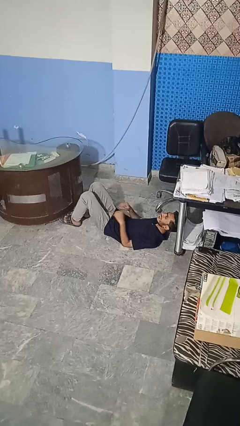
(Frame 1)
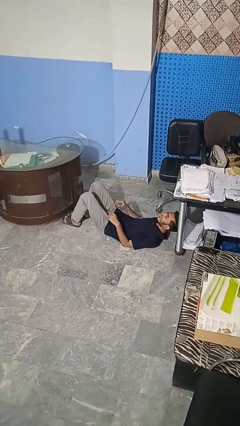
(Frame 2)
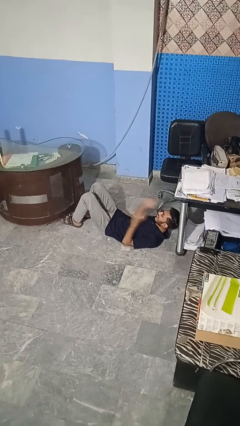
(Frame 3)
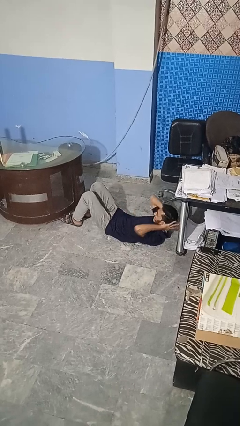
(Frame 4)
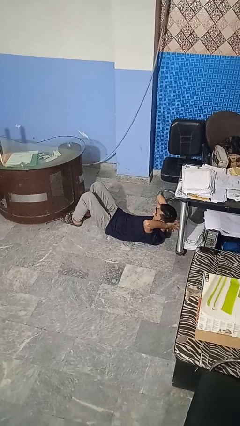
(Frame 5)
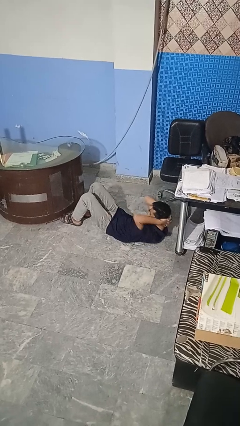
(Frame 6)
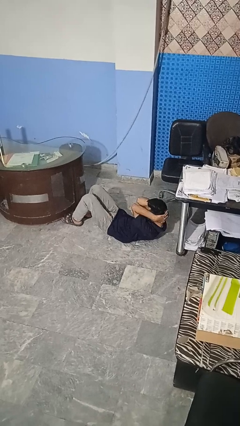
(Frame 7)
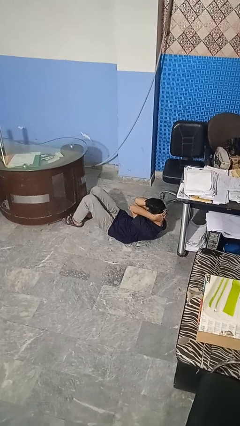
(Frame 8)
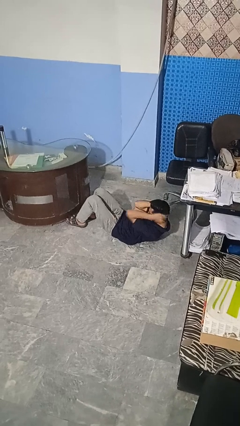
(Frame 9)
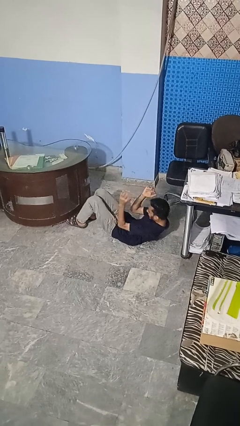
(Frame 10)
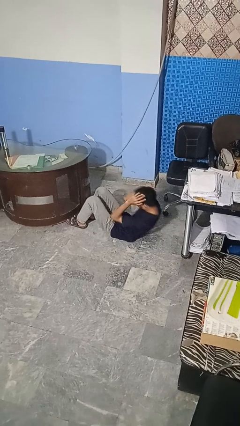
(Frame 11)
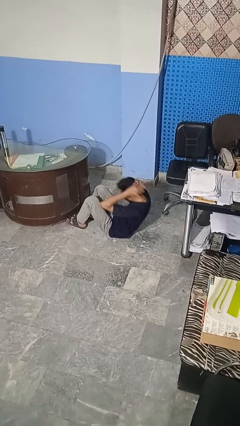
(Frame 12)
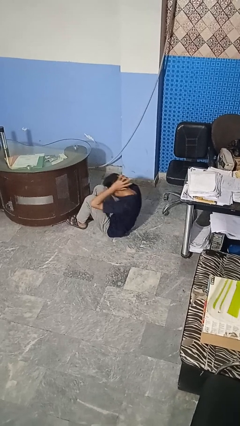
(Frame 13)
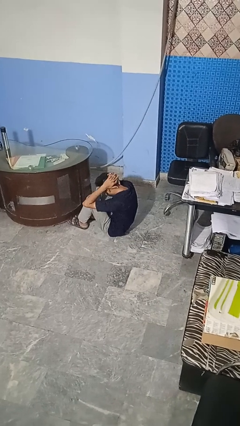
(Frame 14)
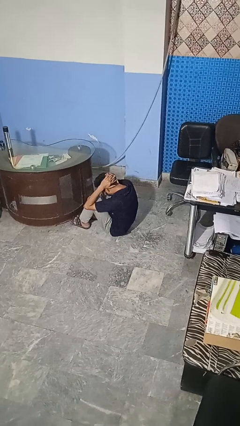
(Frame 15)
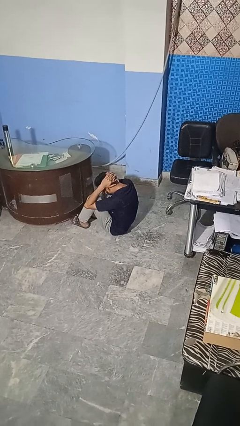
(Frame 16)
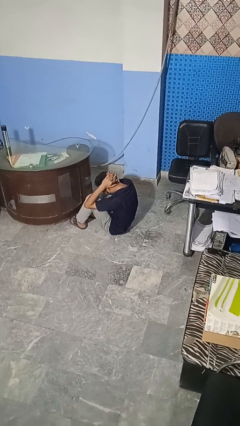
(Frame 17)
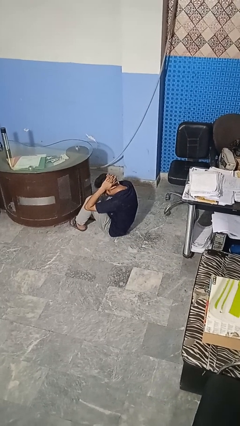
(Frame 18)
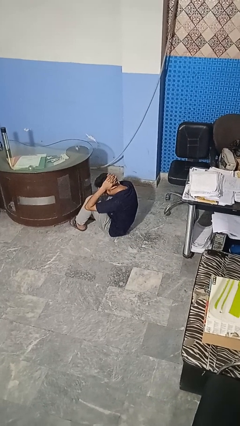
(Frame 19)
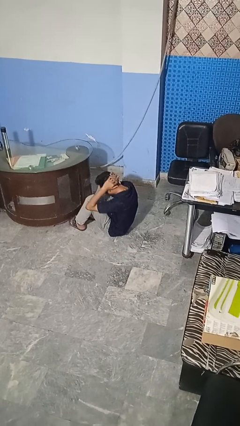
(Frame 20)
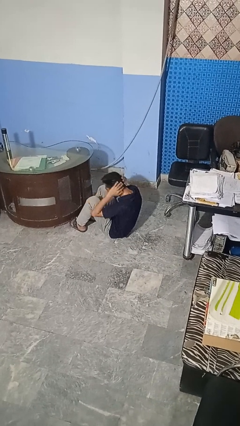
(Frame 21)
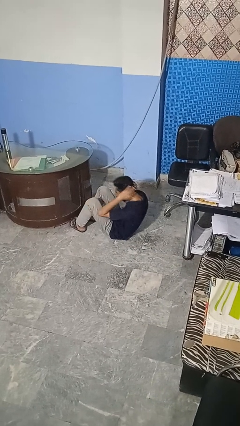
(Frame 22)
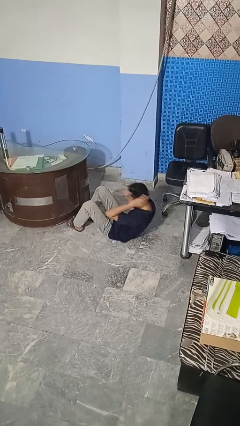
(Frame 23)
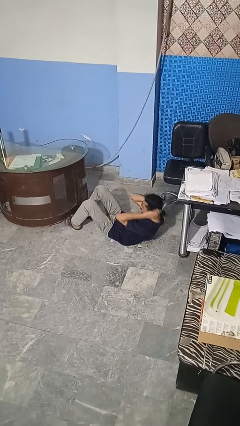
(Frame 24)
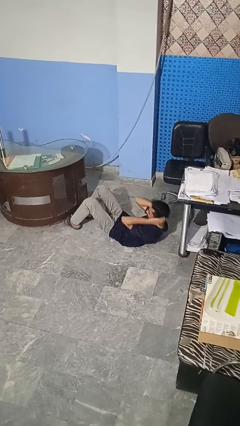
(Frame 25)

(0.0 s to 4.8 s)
person exercises with situp

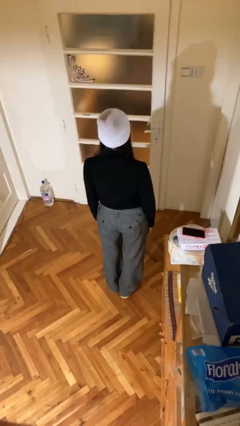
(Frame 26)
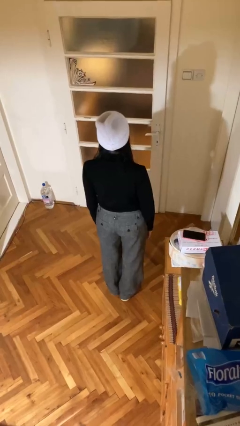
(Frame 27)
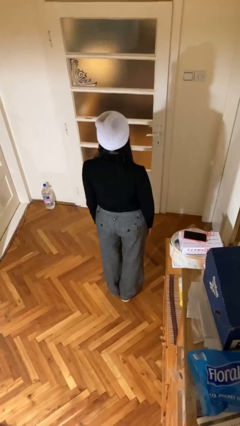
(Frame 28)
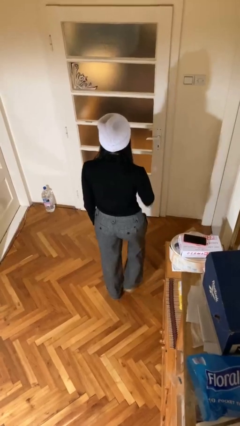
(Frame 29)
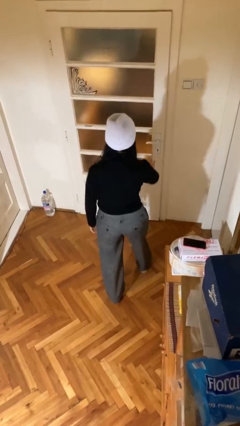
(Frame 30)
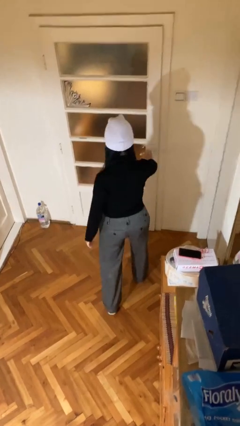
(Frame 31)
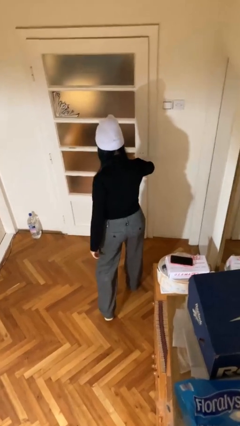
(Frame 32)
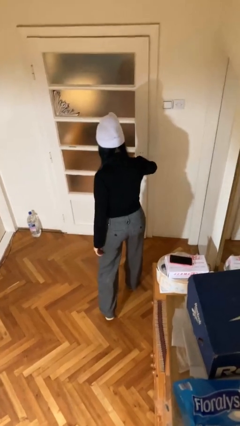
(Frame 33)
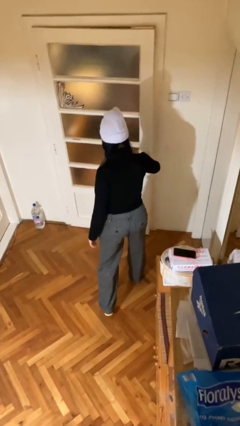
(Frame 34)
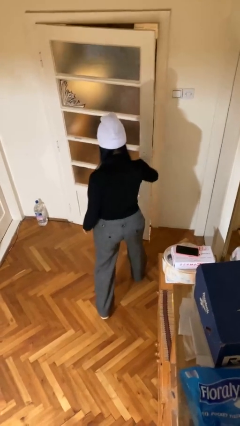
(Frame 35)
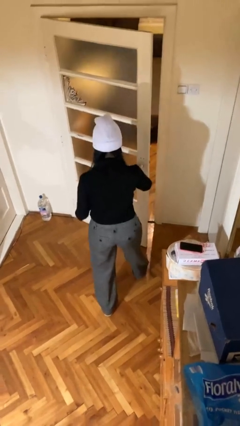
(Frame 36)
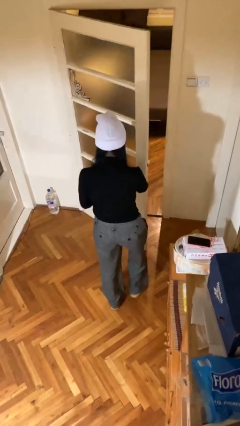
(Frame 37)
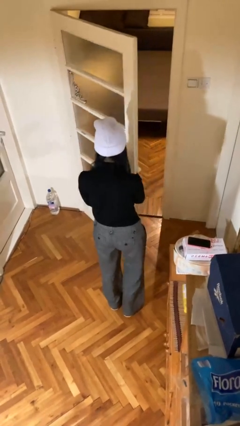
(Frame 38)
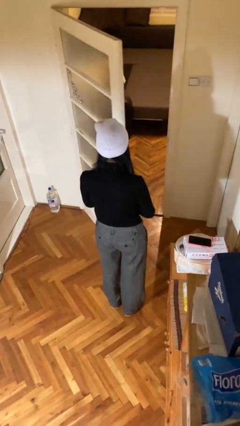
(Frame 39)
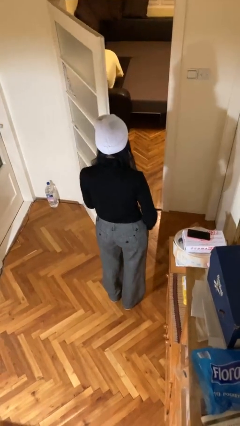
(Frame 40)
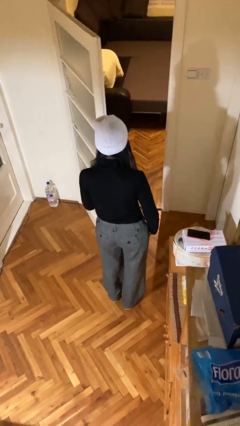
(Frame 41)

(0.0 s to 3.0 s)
person opens facility door

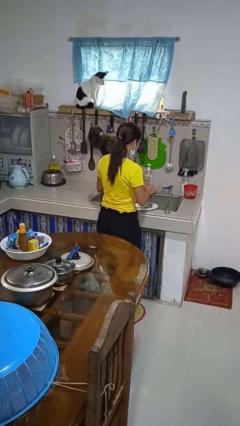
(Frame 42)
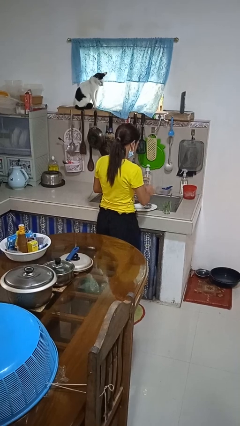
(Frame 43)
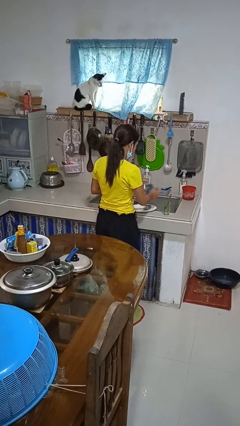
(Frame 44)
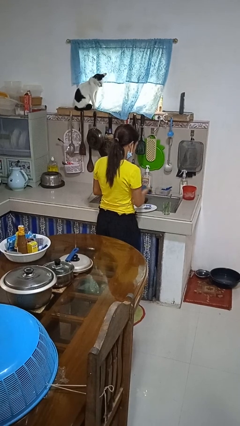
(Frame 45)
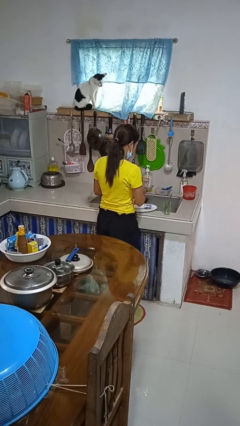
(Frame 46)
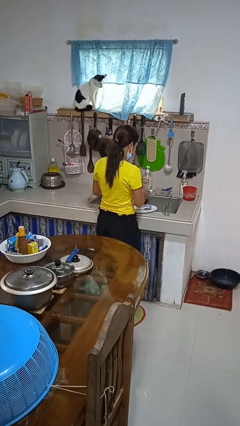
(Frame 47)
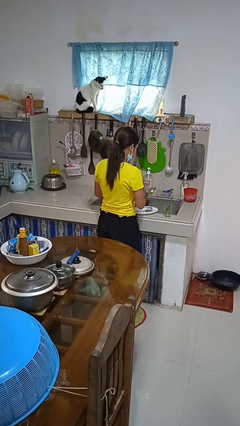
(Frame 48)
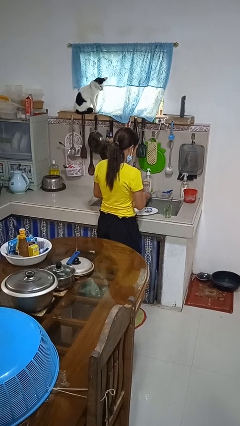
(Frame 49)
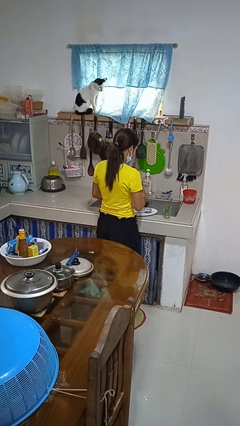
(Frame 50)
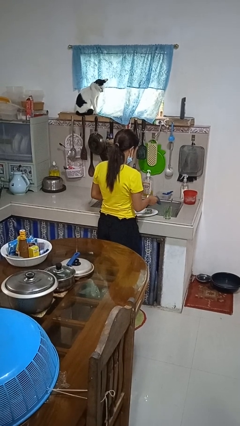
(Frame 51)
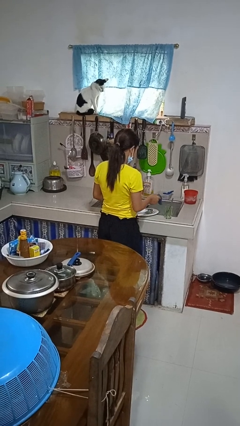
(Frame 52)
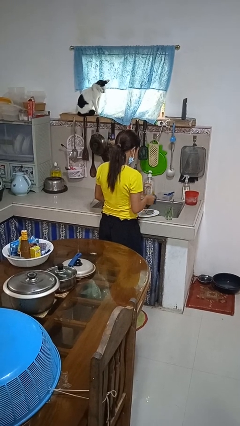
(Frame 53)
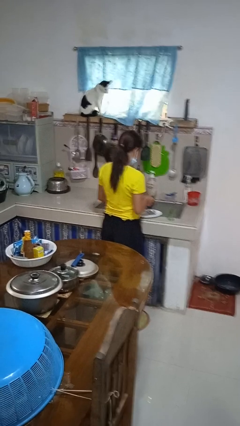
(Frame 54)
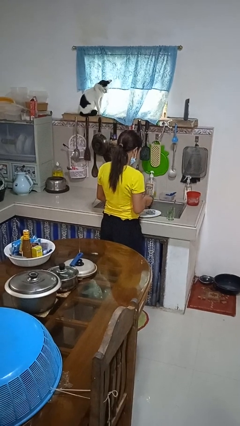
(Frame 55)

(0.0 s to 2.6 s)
person dries dish

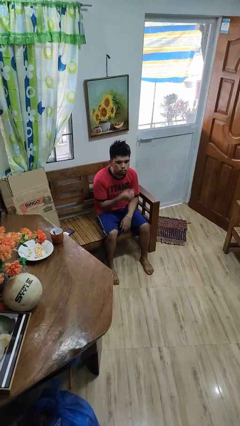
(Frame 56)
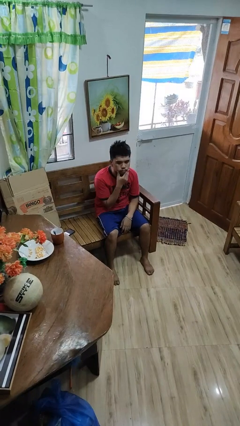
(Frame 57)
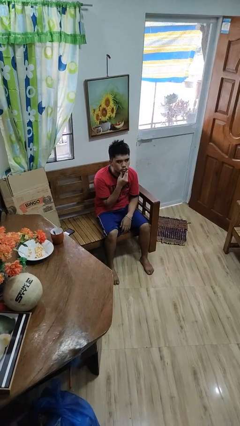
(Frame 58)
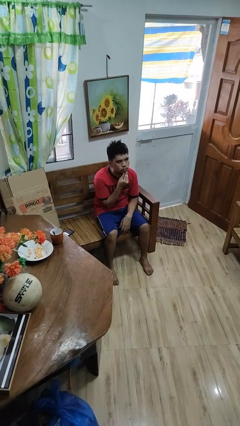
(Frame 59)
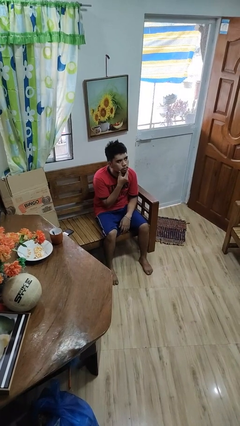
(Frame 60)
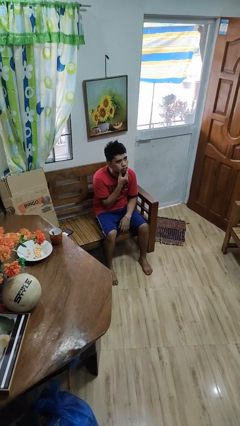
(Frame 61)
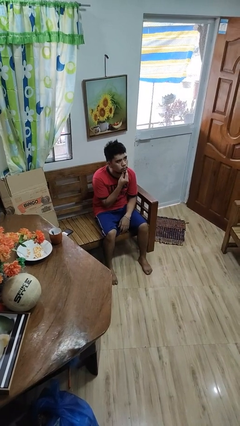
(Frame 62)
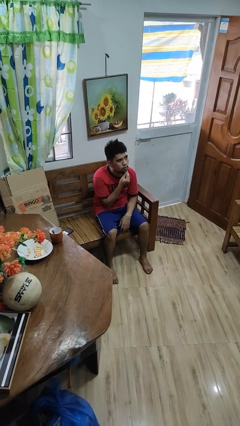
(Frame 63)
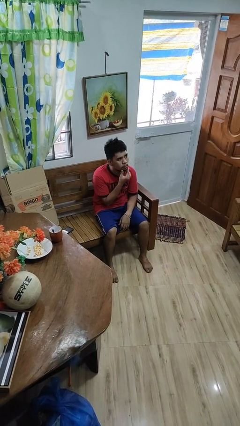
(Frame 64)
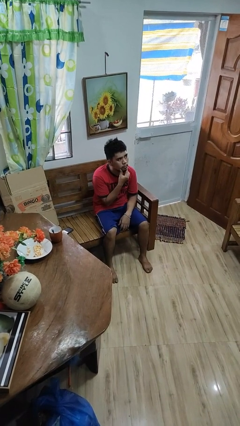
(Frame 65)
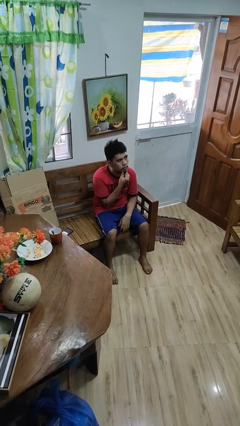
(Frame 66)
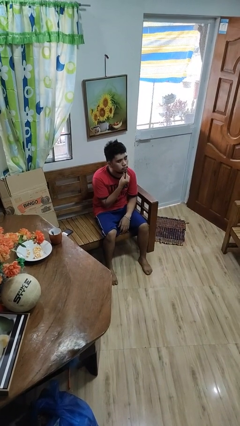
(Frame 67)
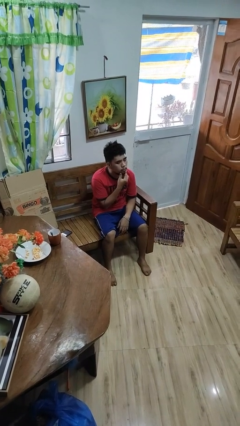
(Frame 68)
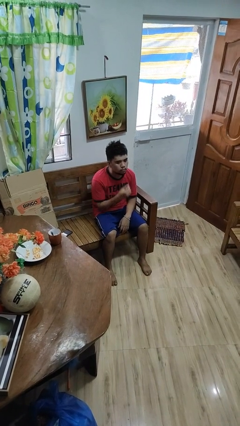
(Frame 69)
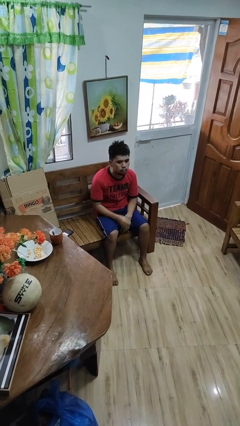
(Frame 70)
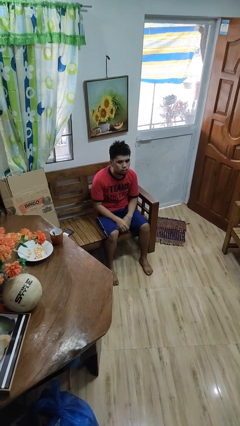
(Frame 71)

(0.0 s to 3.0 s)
person strokes chin

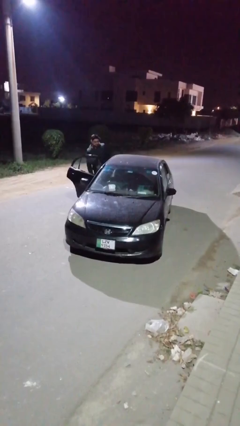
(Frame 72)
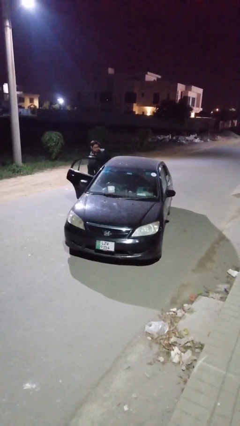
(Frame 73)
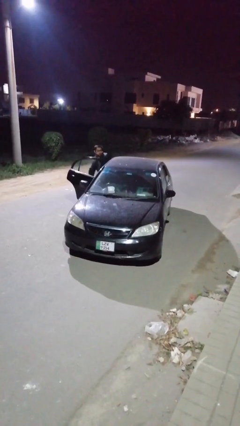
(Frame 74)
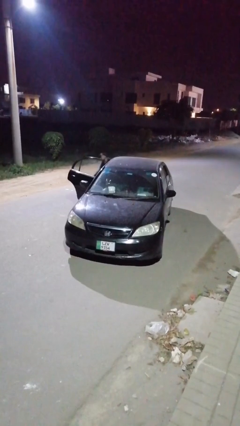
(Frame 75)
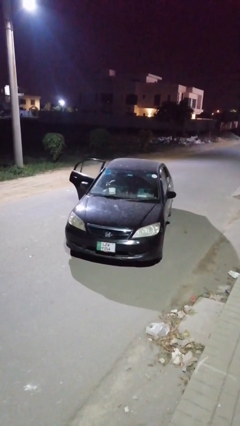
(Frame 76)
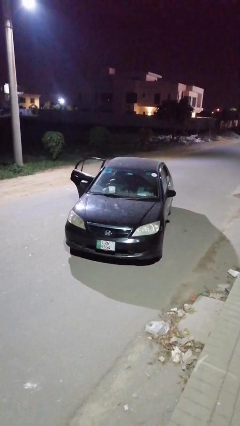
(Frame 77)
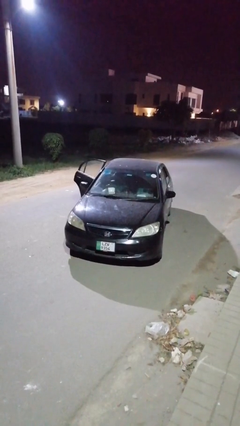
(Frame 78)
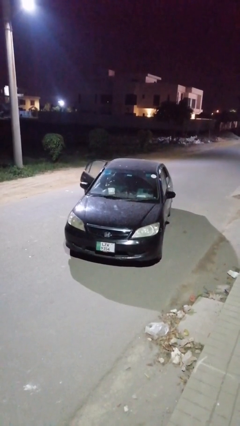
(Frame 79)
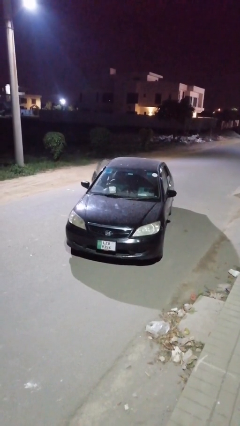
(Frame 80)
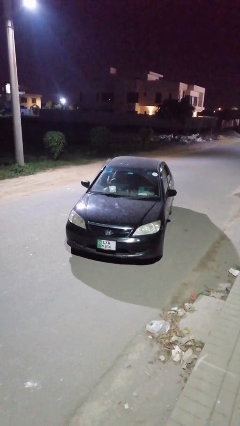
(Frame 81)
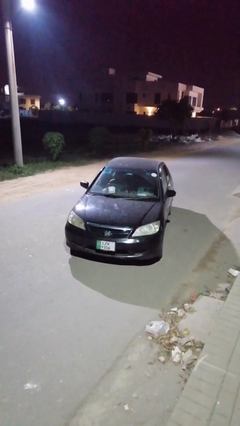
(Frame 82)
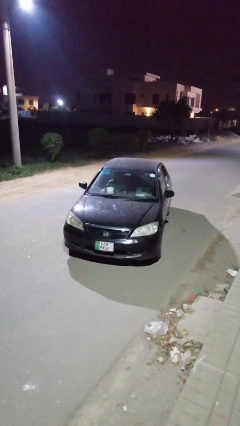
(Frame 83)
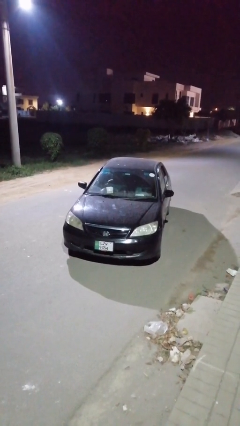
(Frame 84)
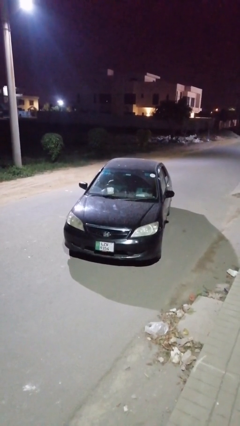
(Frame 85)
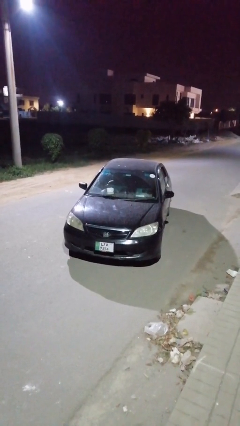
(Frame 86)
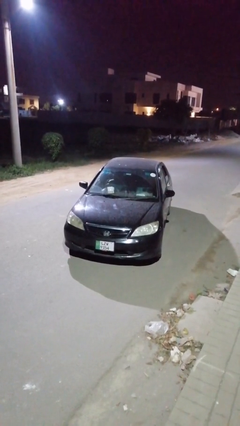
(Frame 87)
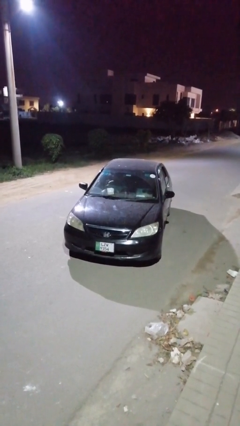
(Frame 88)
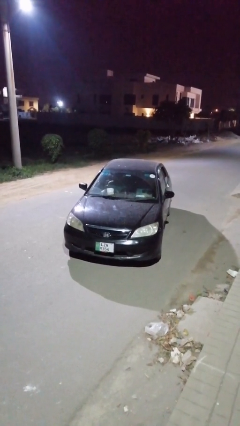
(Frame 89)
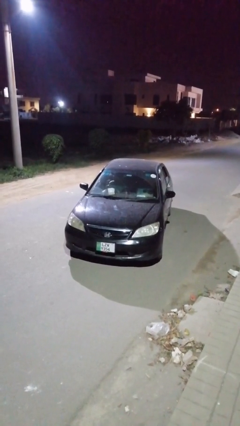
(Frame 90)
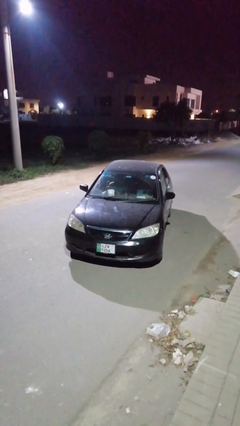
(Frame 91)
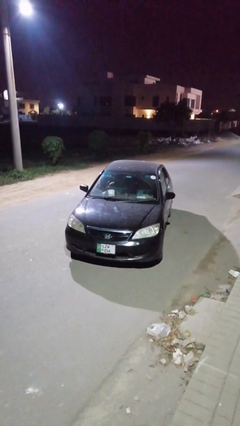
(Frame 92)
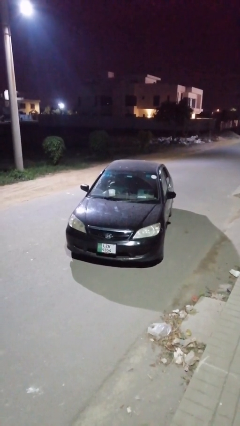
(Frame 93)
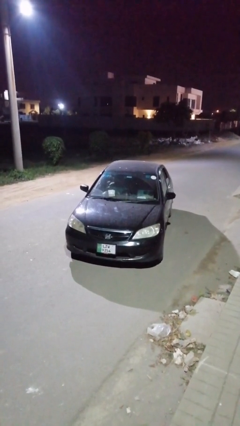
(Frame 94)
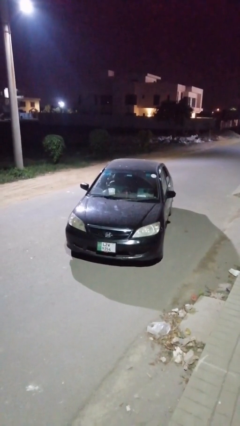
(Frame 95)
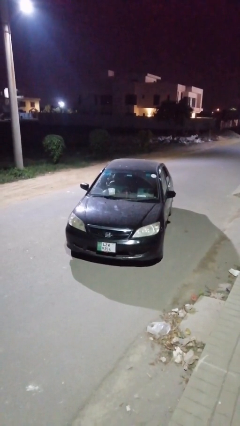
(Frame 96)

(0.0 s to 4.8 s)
car picks up person
